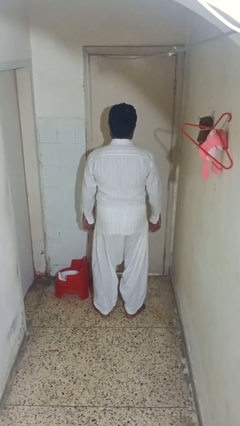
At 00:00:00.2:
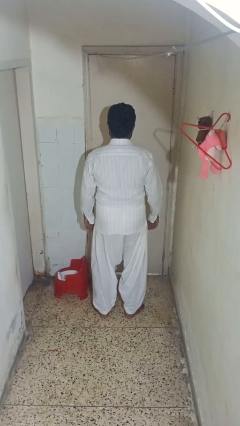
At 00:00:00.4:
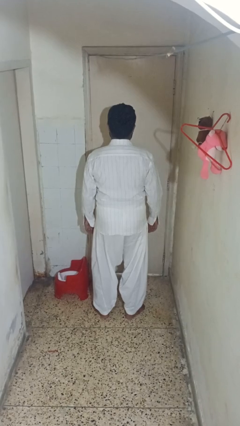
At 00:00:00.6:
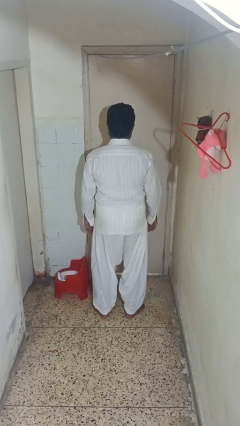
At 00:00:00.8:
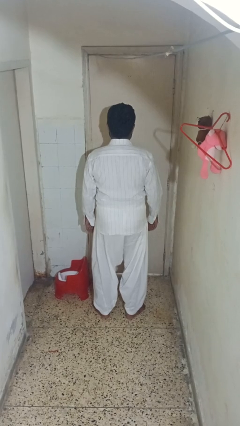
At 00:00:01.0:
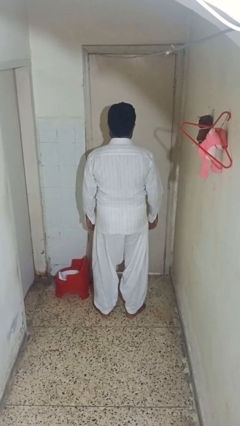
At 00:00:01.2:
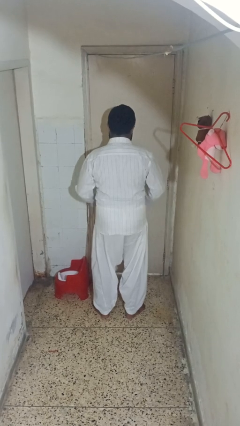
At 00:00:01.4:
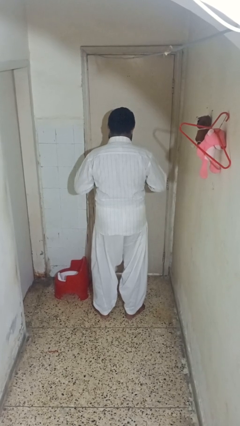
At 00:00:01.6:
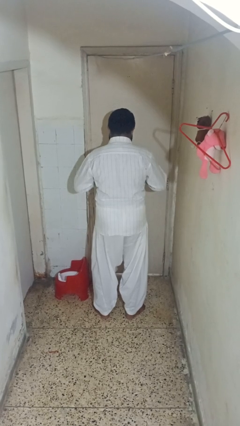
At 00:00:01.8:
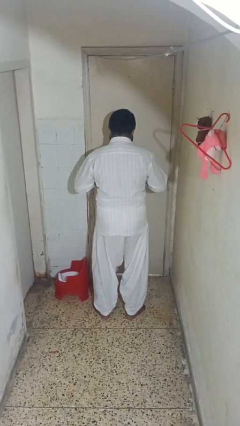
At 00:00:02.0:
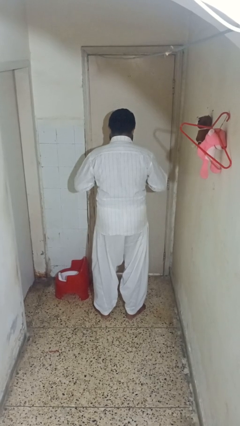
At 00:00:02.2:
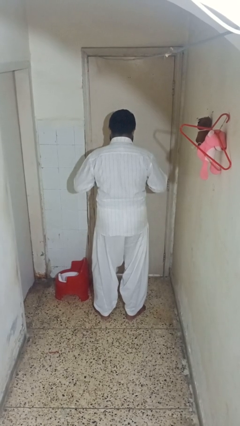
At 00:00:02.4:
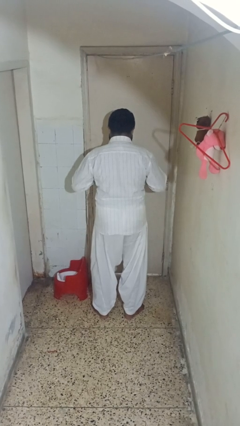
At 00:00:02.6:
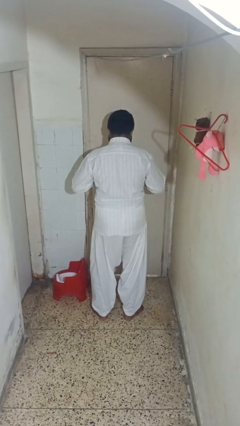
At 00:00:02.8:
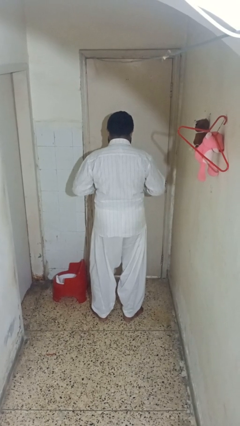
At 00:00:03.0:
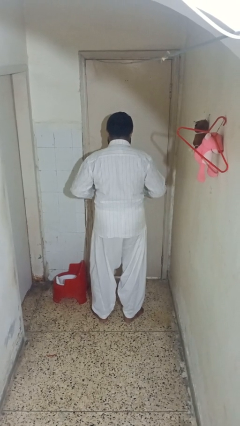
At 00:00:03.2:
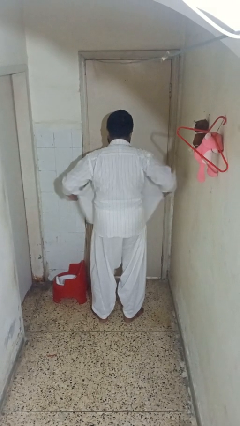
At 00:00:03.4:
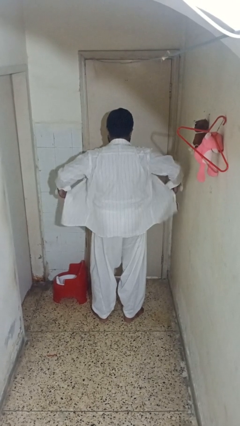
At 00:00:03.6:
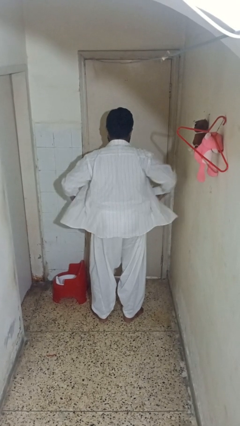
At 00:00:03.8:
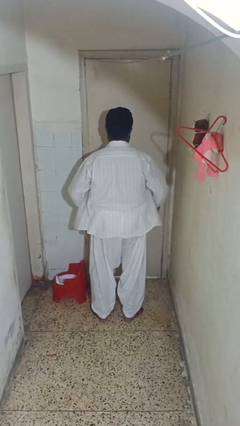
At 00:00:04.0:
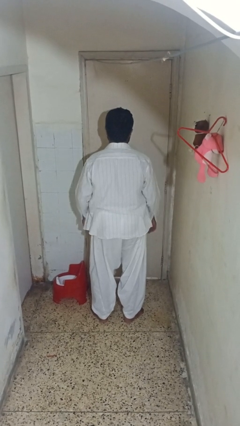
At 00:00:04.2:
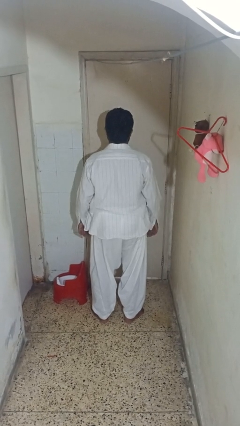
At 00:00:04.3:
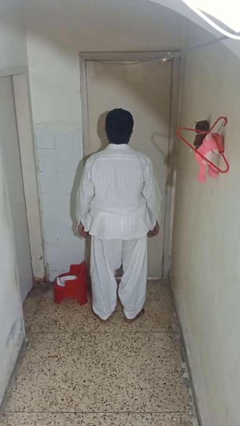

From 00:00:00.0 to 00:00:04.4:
person unbuttons shirt

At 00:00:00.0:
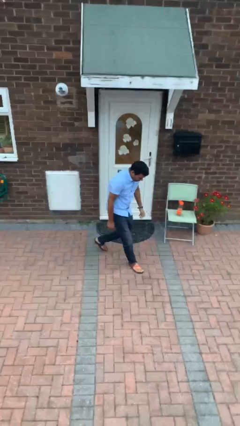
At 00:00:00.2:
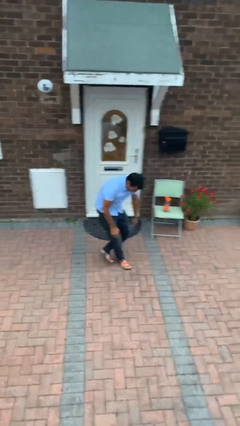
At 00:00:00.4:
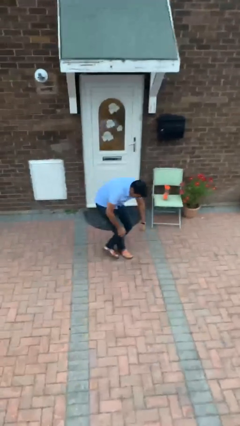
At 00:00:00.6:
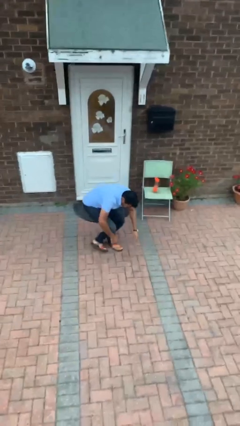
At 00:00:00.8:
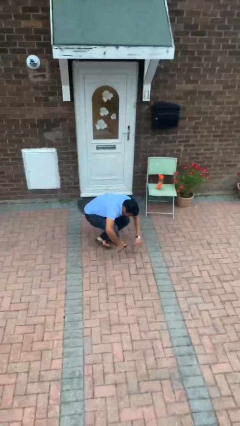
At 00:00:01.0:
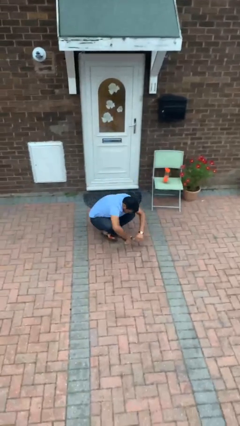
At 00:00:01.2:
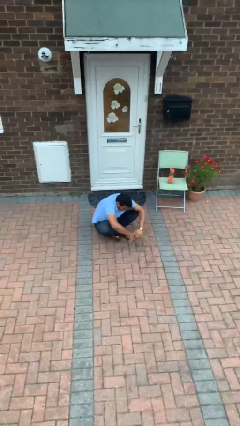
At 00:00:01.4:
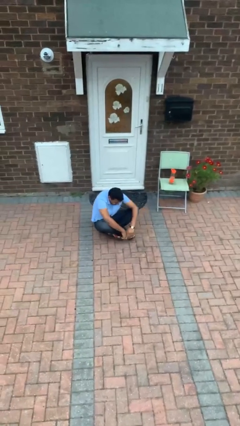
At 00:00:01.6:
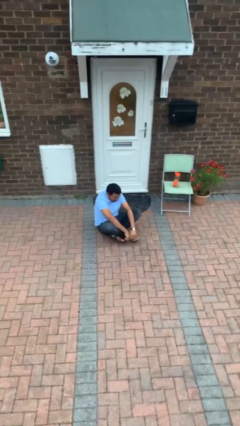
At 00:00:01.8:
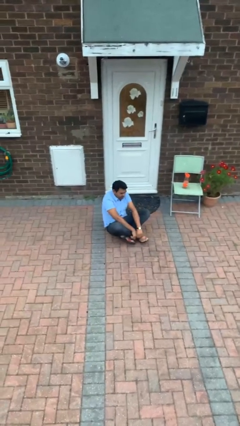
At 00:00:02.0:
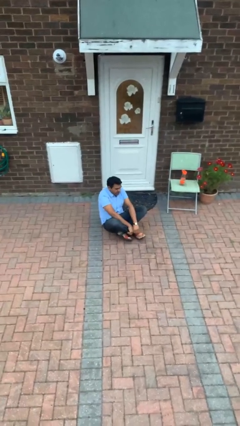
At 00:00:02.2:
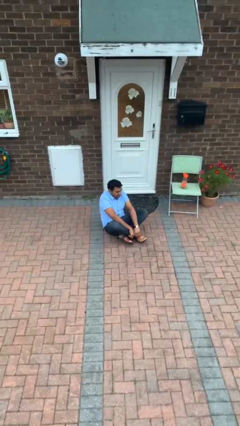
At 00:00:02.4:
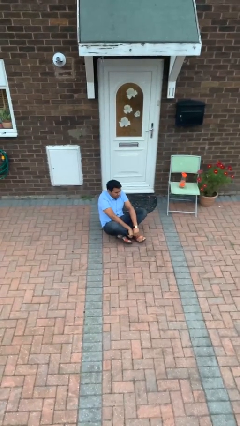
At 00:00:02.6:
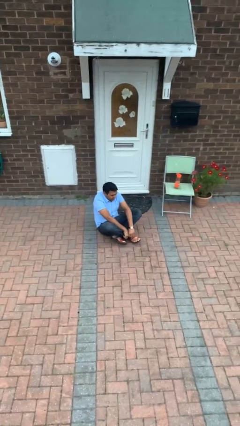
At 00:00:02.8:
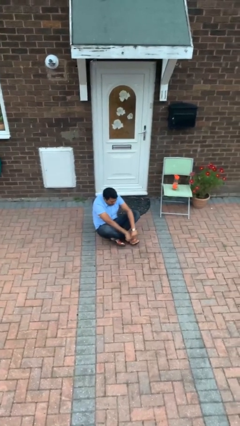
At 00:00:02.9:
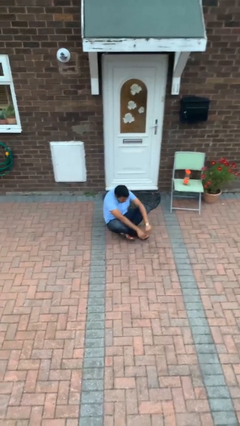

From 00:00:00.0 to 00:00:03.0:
person sits crisscross

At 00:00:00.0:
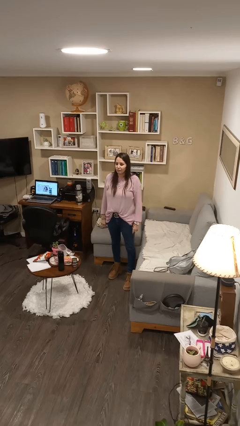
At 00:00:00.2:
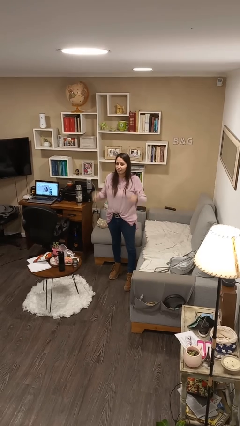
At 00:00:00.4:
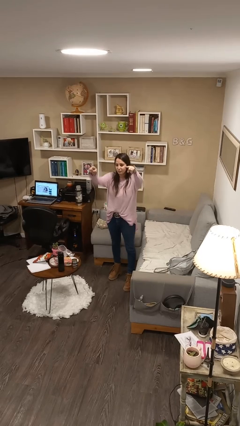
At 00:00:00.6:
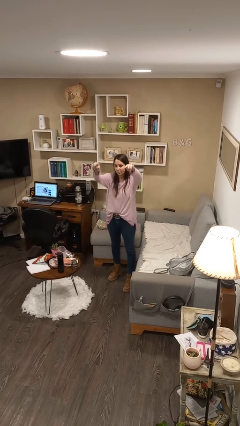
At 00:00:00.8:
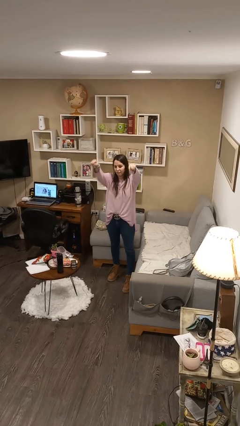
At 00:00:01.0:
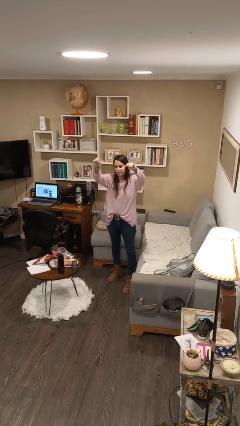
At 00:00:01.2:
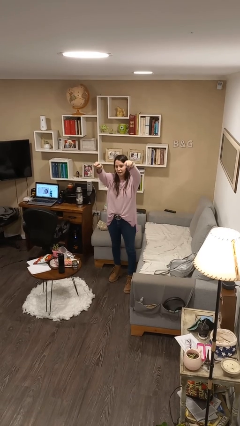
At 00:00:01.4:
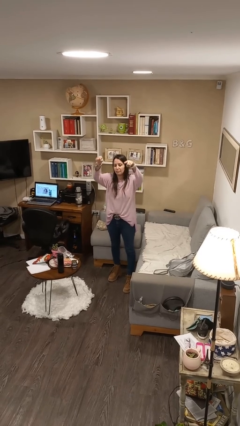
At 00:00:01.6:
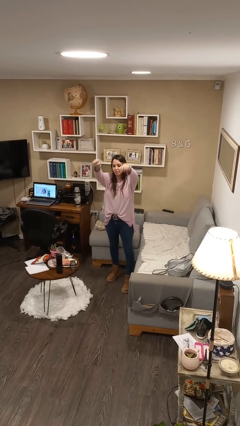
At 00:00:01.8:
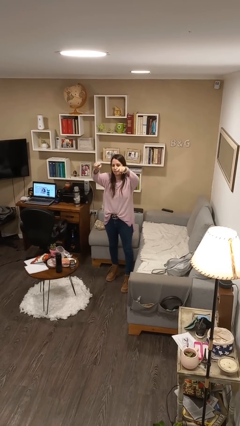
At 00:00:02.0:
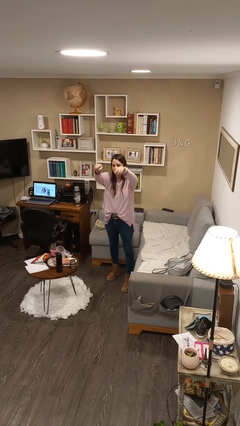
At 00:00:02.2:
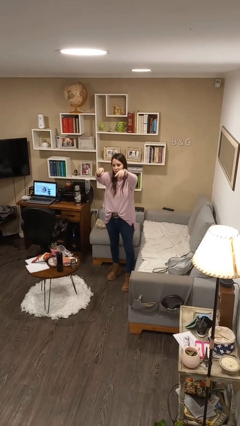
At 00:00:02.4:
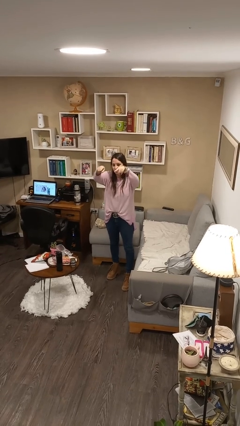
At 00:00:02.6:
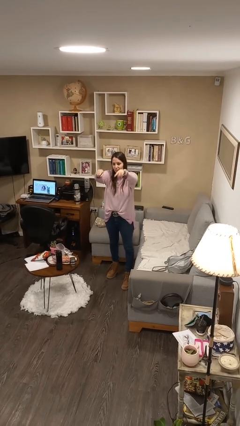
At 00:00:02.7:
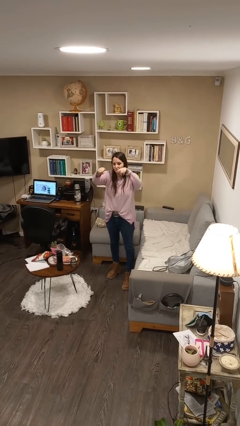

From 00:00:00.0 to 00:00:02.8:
person points at person

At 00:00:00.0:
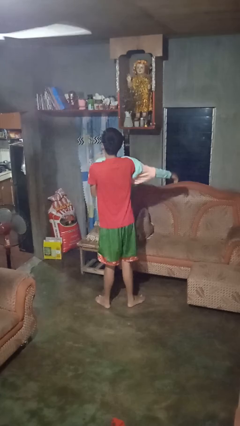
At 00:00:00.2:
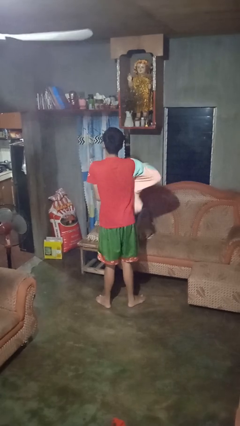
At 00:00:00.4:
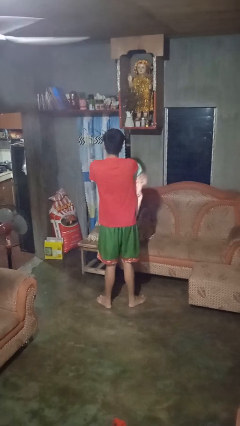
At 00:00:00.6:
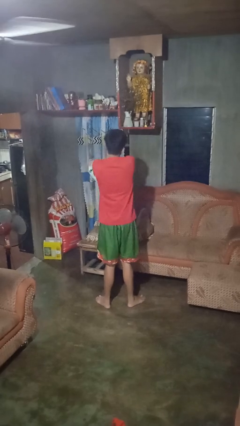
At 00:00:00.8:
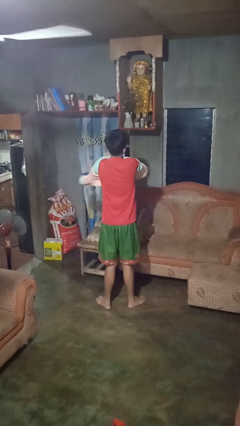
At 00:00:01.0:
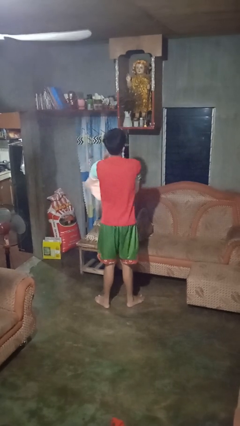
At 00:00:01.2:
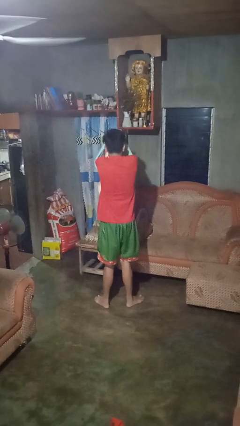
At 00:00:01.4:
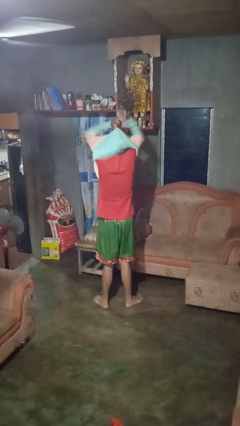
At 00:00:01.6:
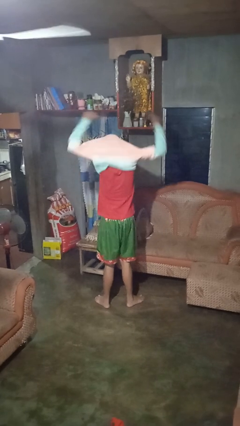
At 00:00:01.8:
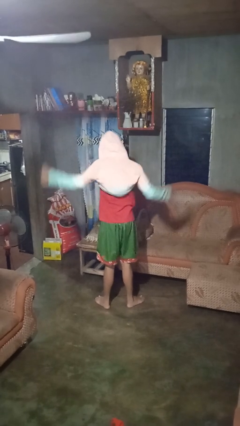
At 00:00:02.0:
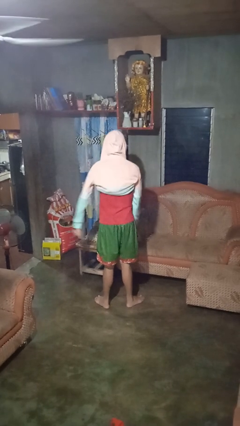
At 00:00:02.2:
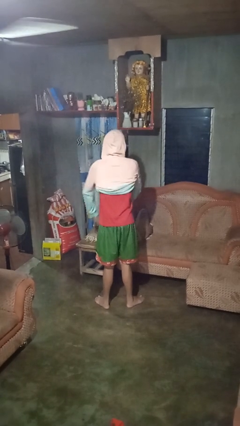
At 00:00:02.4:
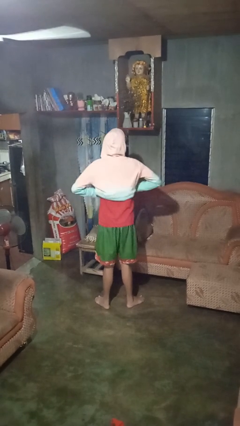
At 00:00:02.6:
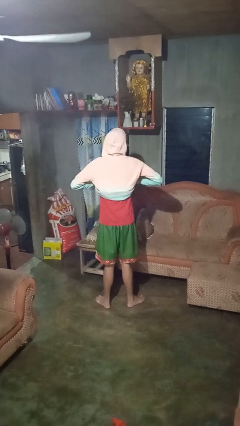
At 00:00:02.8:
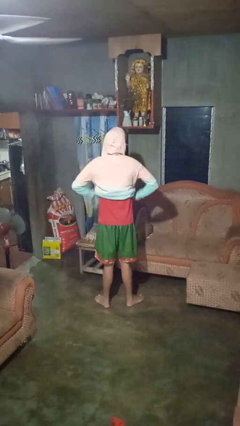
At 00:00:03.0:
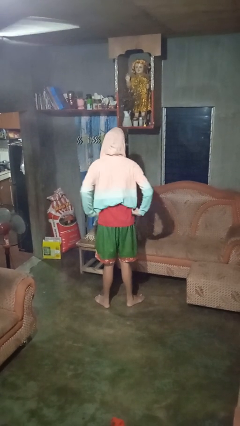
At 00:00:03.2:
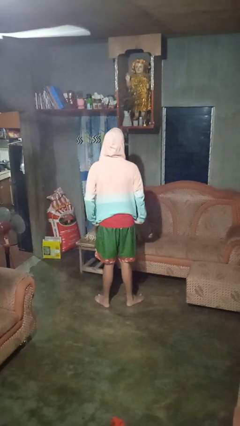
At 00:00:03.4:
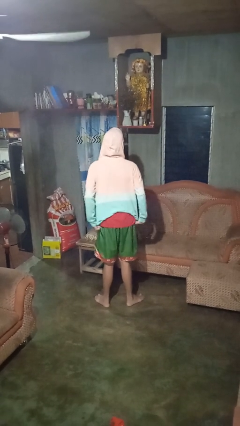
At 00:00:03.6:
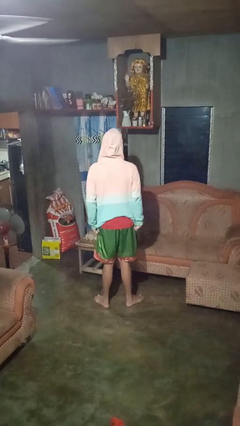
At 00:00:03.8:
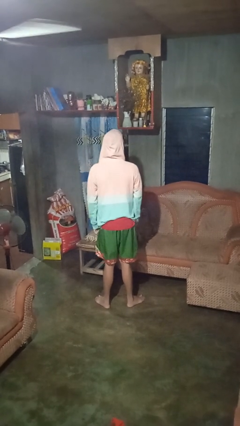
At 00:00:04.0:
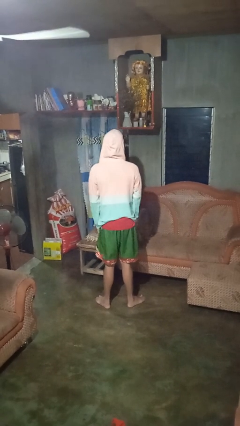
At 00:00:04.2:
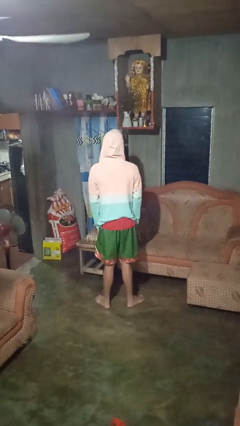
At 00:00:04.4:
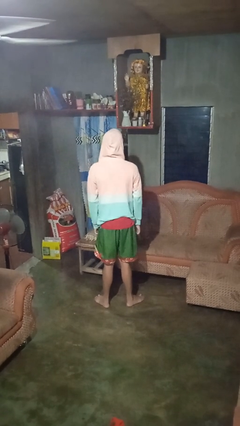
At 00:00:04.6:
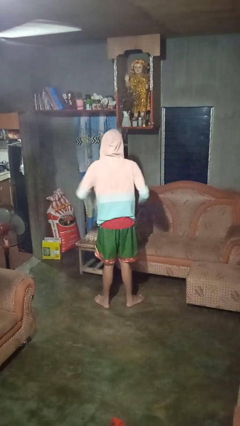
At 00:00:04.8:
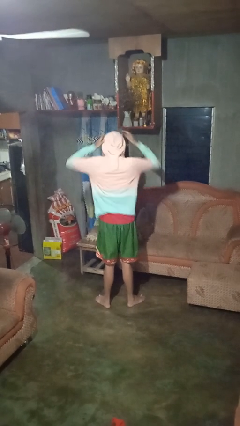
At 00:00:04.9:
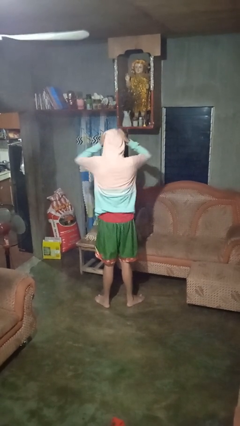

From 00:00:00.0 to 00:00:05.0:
person puts on hoodie

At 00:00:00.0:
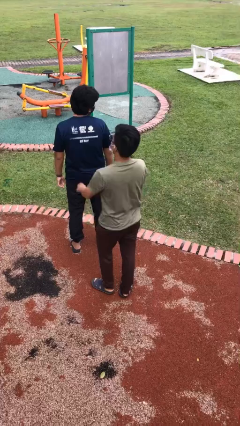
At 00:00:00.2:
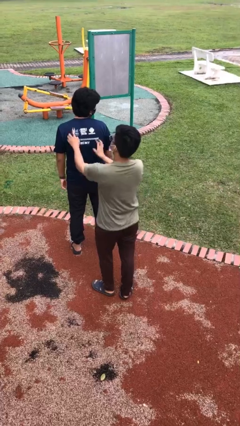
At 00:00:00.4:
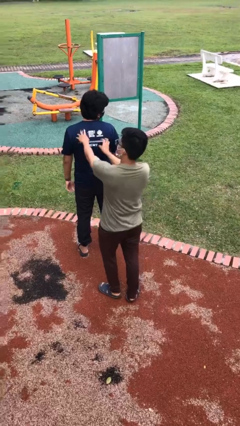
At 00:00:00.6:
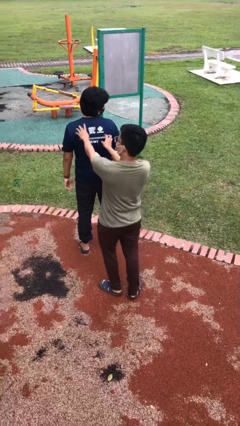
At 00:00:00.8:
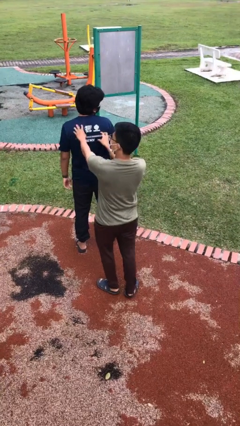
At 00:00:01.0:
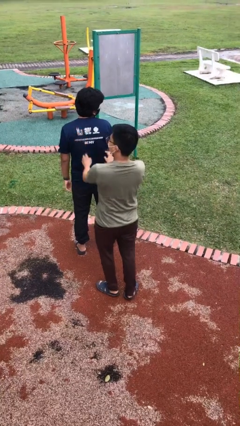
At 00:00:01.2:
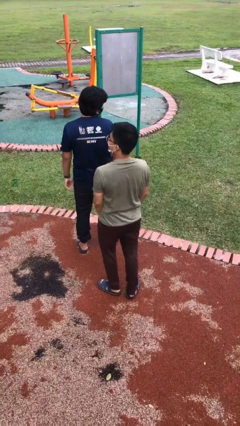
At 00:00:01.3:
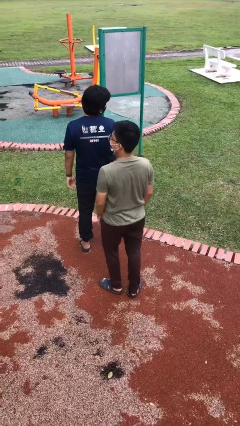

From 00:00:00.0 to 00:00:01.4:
person tickles person

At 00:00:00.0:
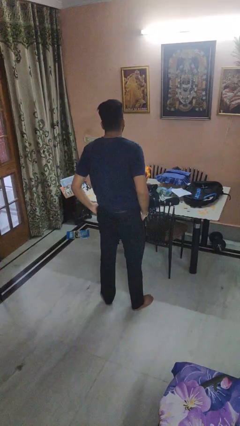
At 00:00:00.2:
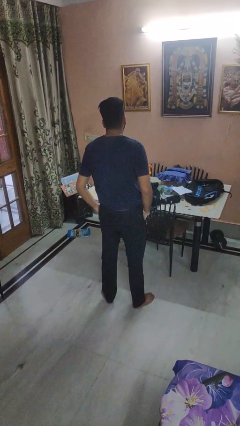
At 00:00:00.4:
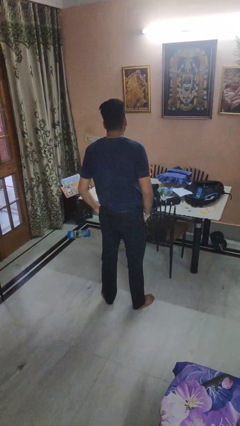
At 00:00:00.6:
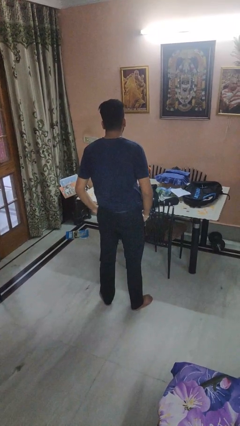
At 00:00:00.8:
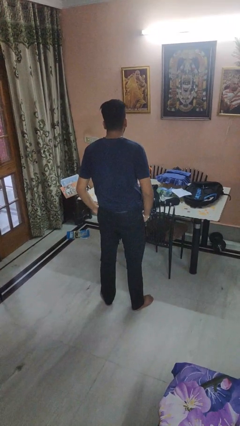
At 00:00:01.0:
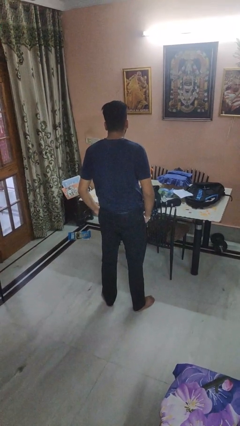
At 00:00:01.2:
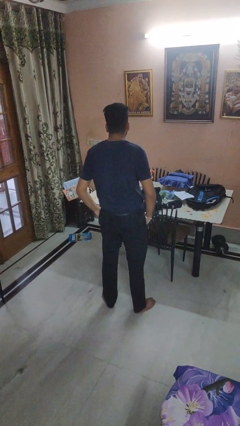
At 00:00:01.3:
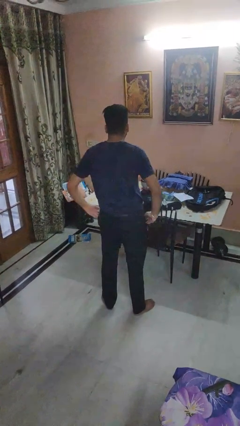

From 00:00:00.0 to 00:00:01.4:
person puts hands in back pockets
